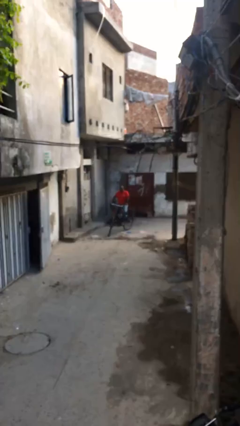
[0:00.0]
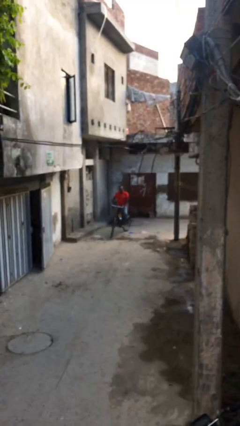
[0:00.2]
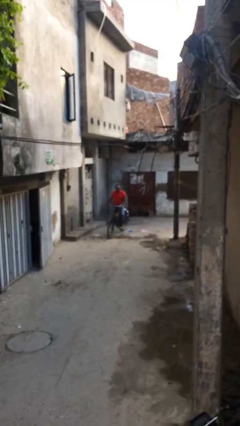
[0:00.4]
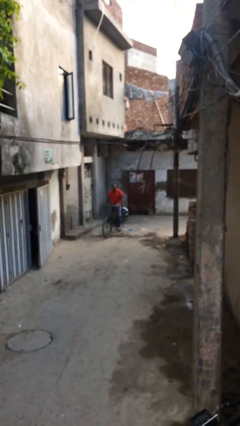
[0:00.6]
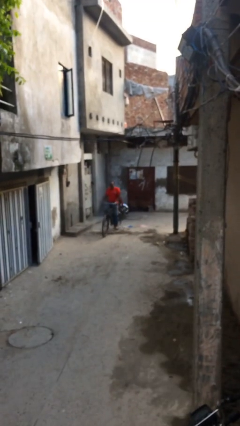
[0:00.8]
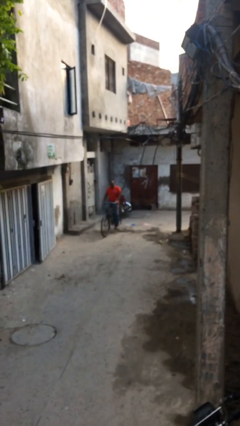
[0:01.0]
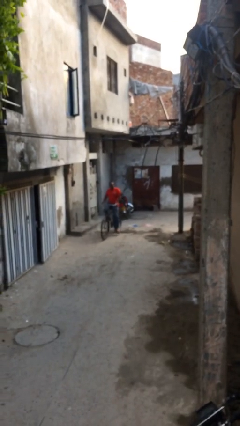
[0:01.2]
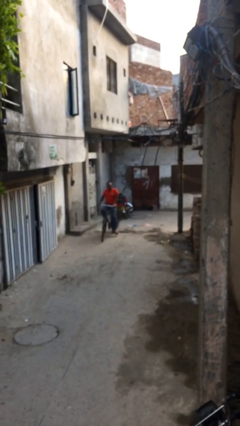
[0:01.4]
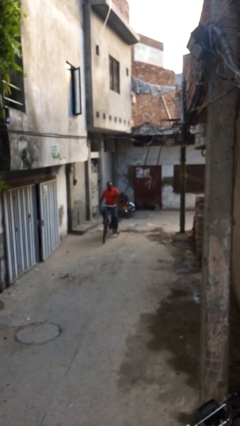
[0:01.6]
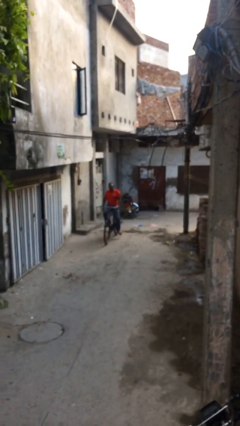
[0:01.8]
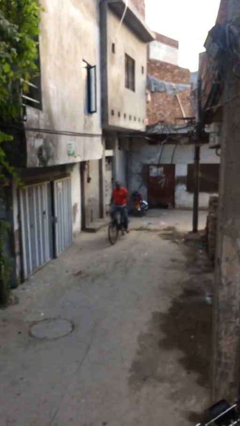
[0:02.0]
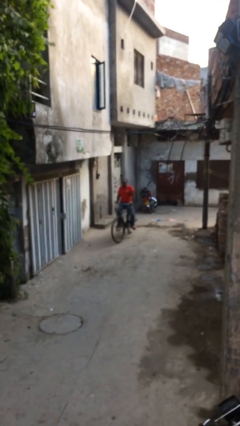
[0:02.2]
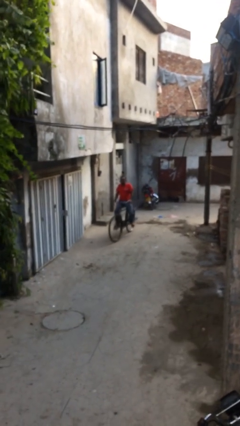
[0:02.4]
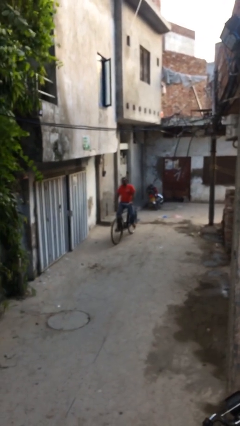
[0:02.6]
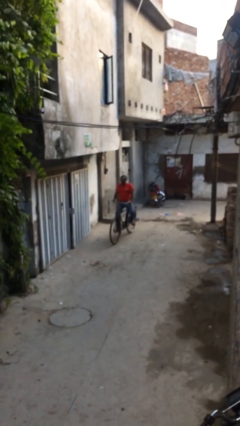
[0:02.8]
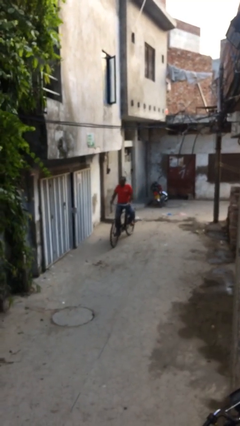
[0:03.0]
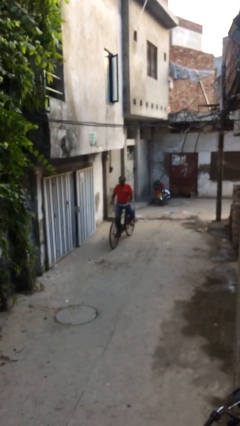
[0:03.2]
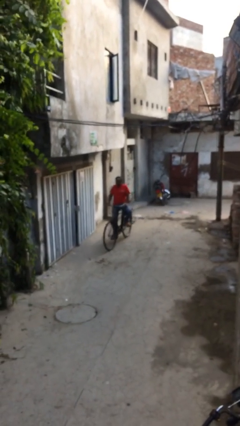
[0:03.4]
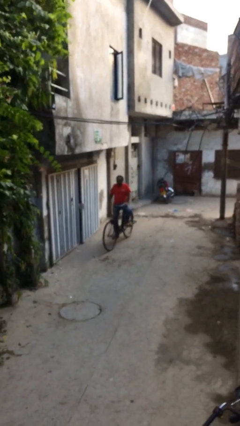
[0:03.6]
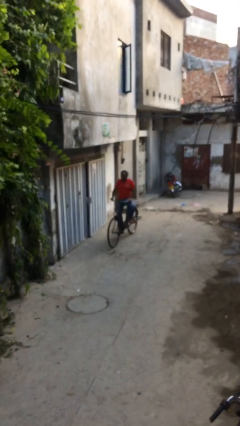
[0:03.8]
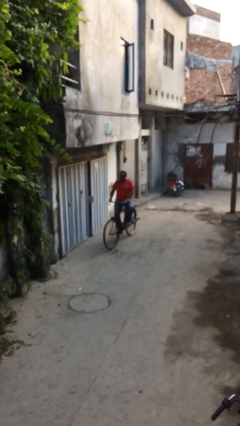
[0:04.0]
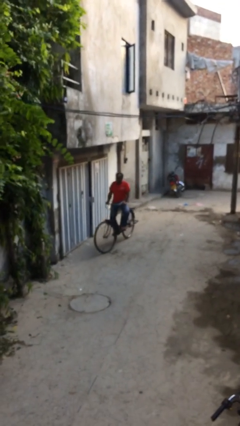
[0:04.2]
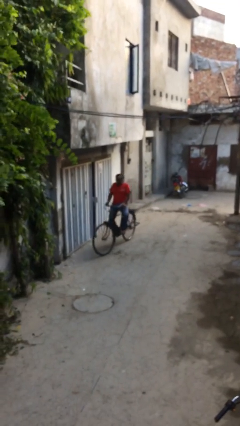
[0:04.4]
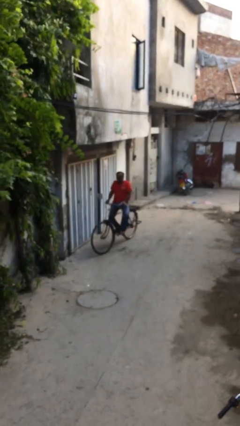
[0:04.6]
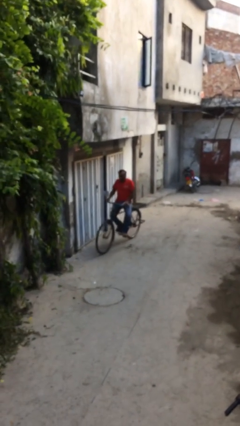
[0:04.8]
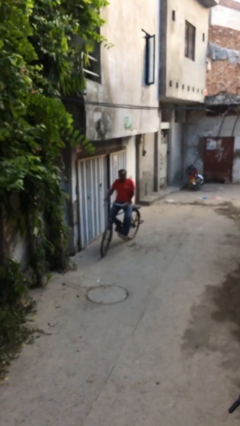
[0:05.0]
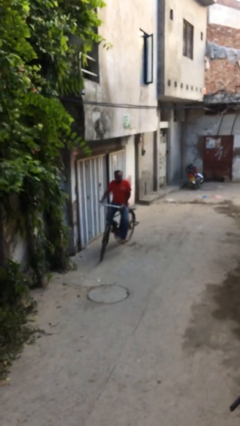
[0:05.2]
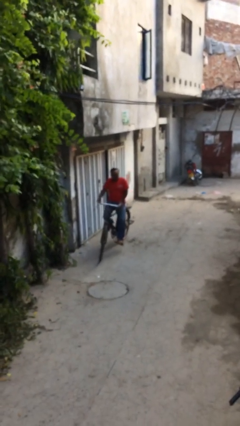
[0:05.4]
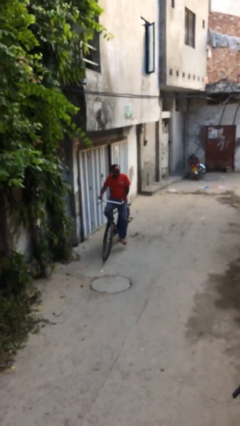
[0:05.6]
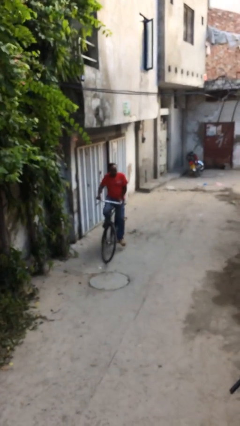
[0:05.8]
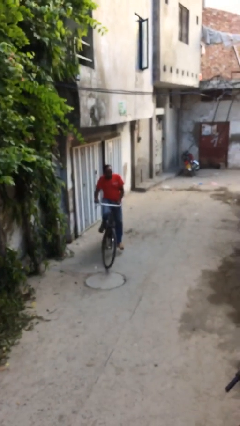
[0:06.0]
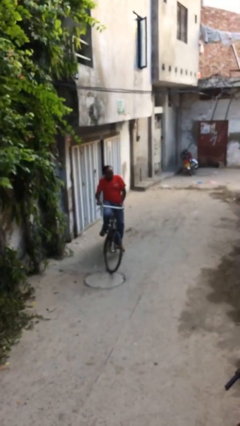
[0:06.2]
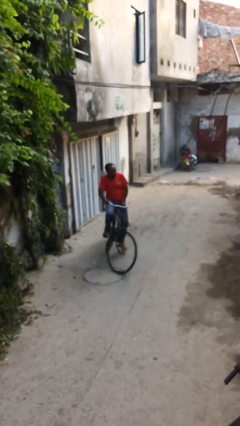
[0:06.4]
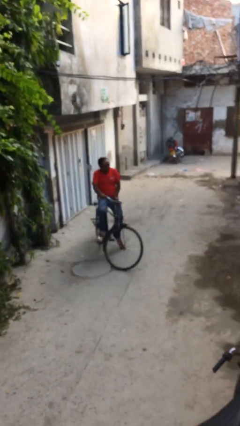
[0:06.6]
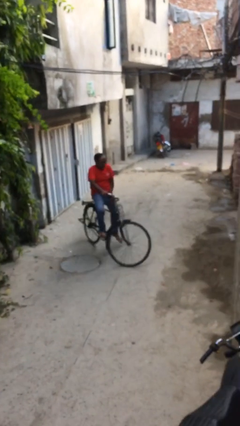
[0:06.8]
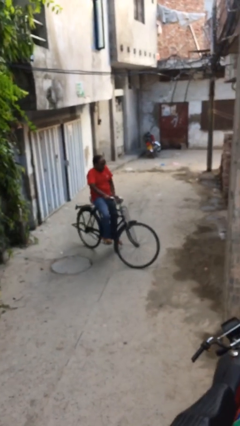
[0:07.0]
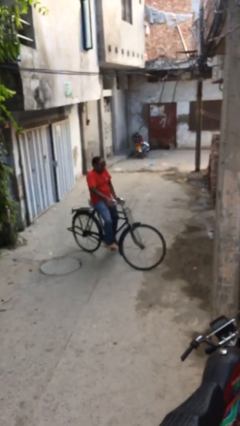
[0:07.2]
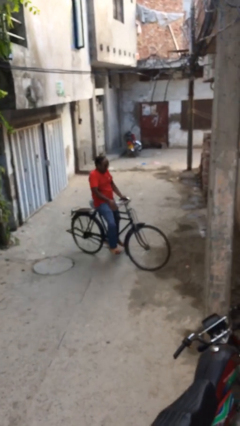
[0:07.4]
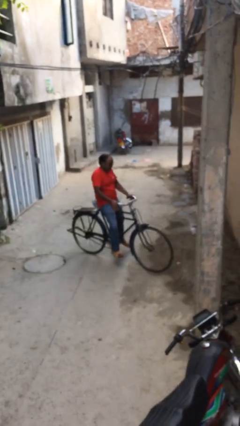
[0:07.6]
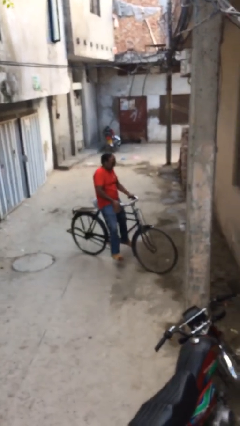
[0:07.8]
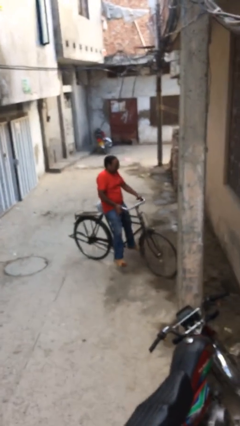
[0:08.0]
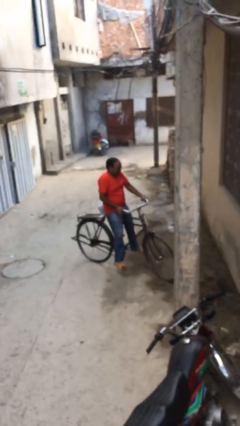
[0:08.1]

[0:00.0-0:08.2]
person rides bicycle

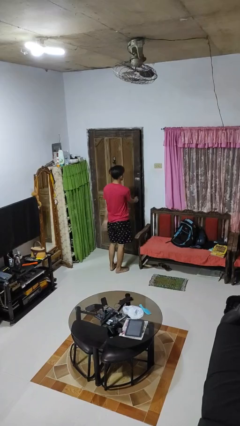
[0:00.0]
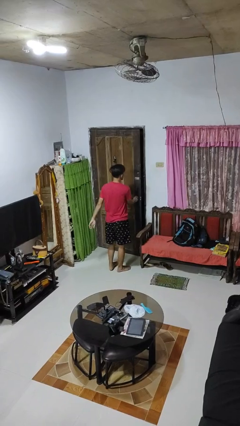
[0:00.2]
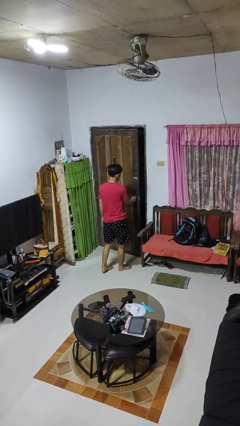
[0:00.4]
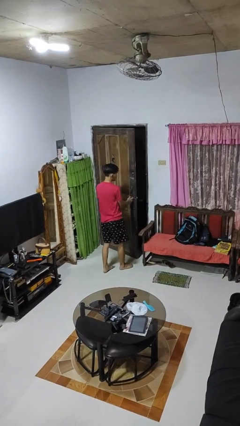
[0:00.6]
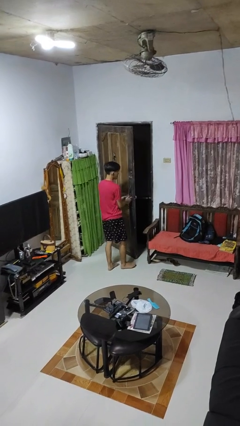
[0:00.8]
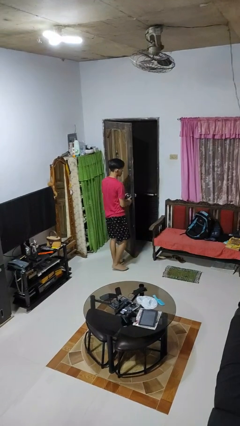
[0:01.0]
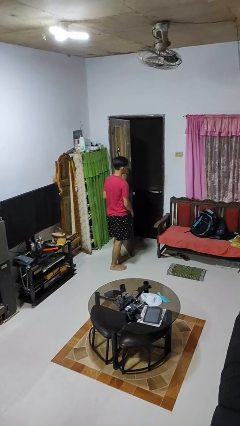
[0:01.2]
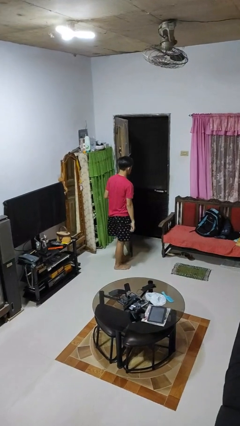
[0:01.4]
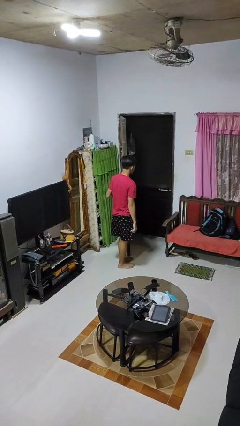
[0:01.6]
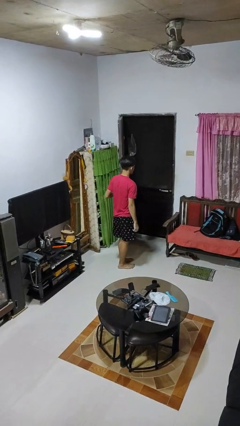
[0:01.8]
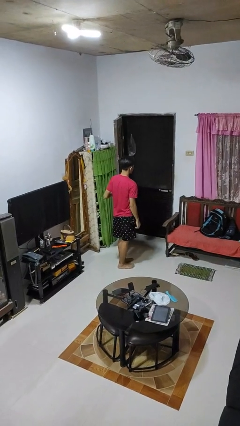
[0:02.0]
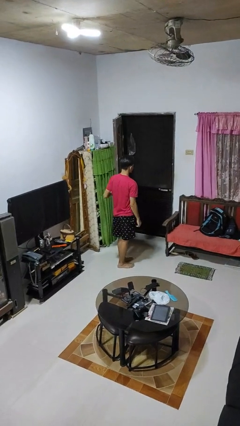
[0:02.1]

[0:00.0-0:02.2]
person opens facility door

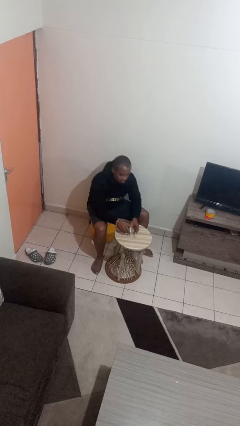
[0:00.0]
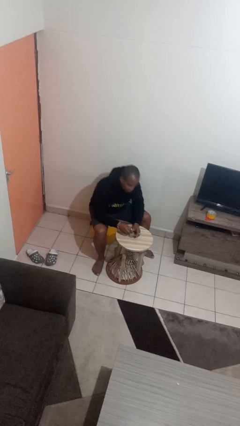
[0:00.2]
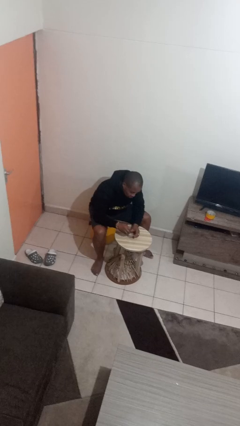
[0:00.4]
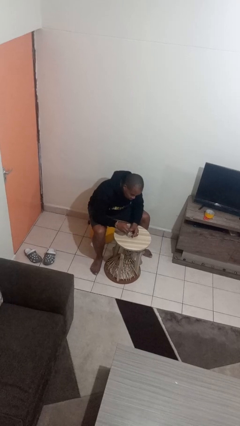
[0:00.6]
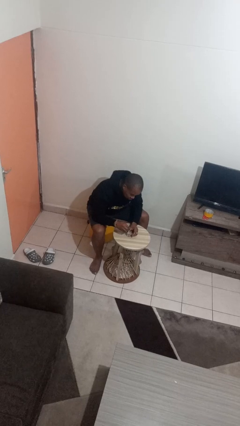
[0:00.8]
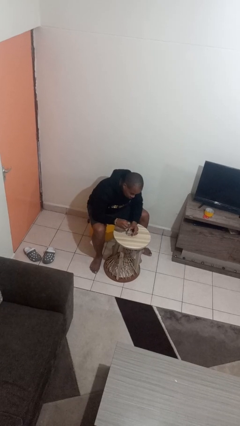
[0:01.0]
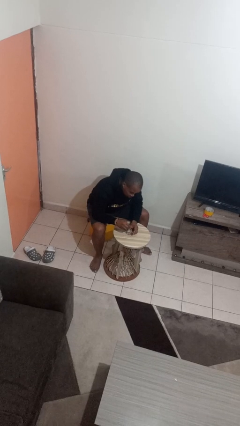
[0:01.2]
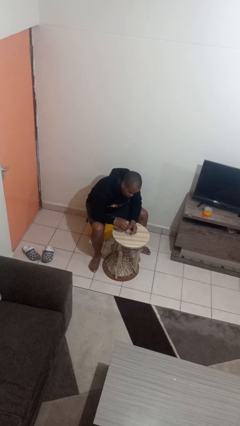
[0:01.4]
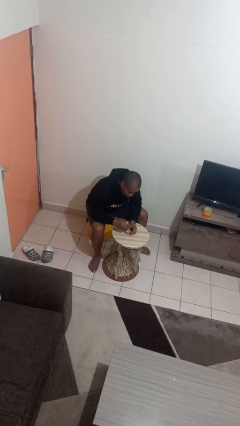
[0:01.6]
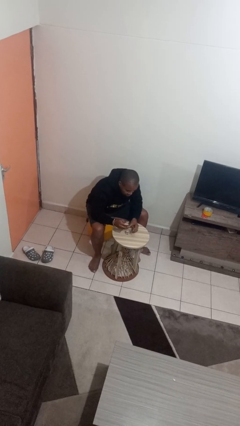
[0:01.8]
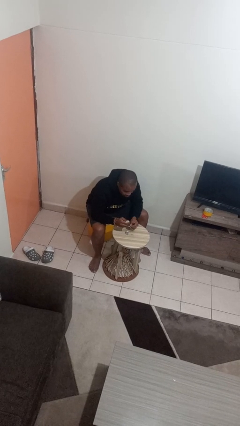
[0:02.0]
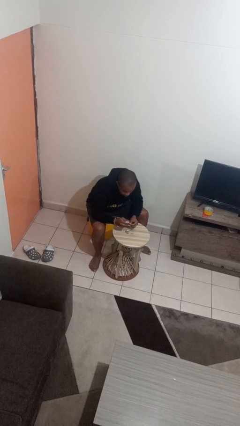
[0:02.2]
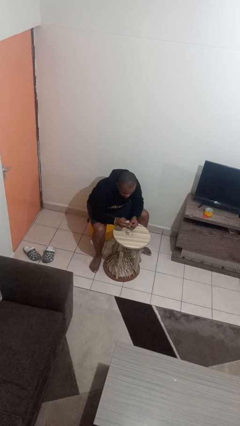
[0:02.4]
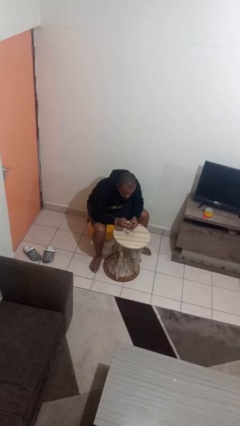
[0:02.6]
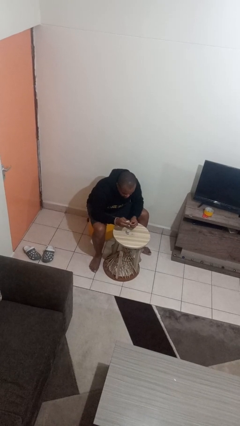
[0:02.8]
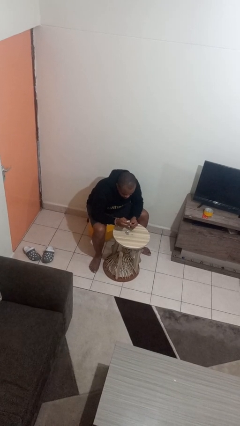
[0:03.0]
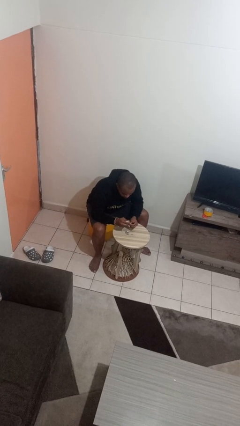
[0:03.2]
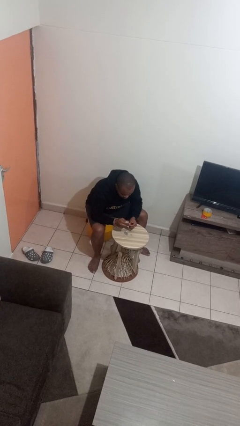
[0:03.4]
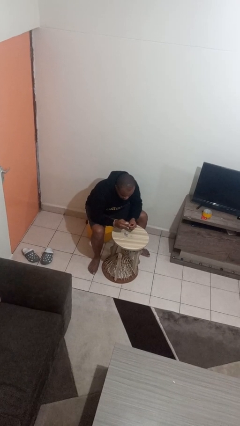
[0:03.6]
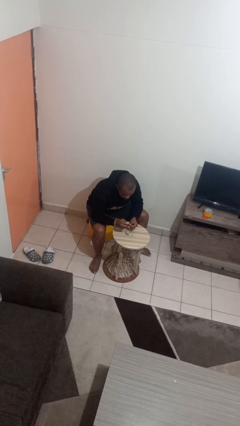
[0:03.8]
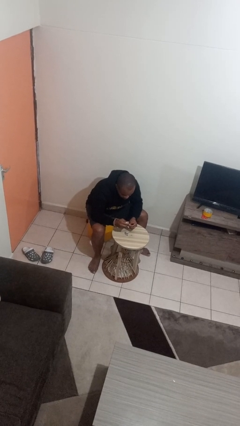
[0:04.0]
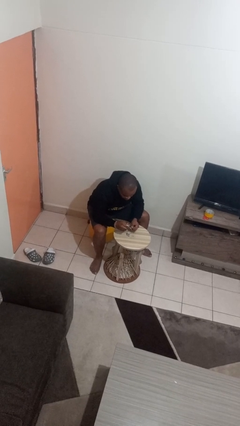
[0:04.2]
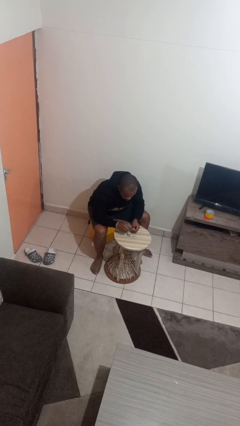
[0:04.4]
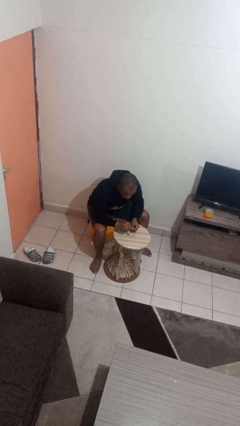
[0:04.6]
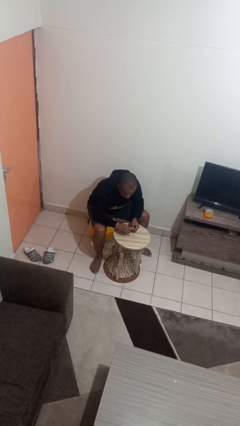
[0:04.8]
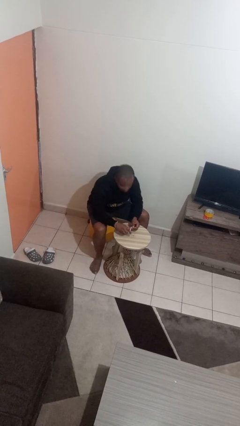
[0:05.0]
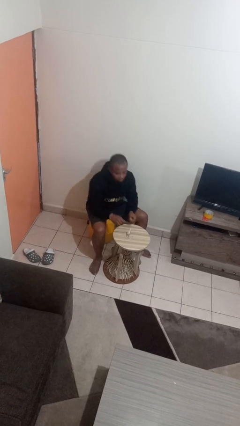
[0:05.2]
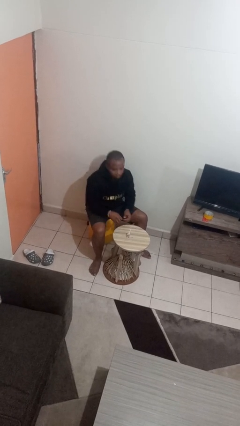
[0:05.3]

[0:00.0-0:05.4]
person paints fingernails

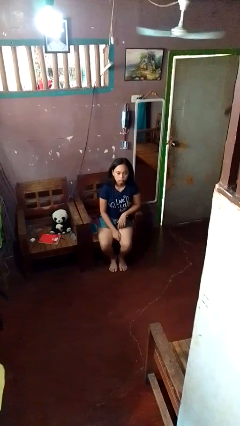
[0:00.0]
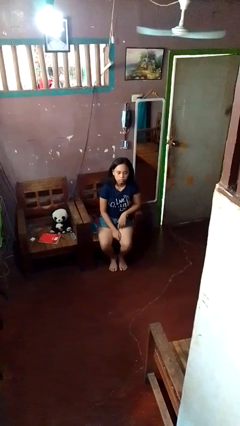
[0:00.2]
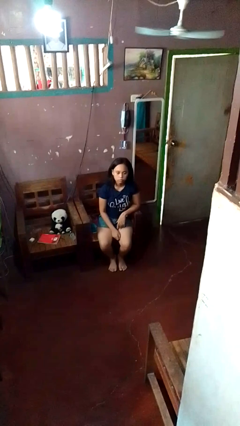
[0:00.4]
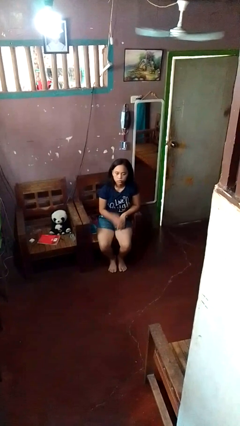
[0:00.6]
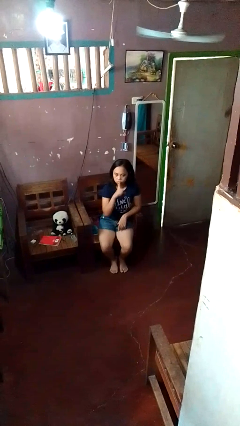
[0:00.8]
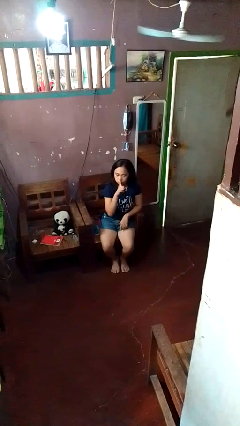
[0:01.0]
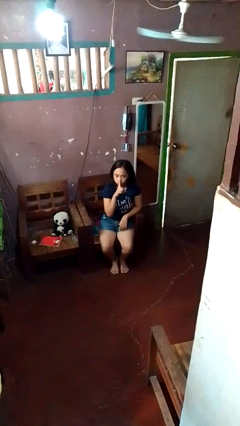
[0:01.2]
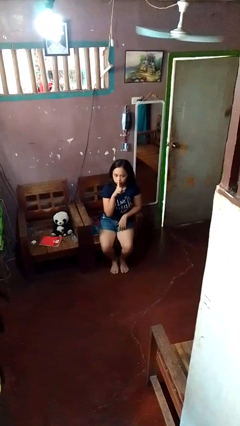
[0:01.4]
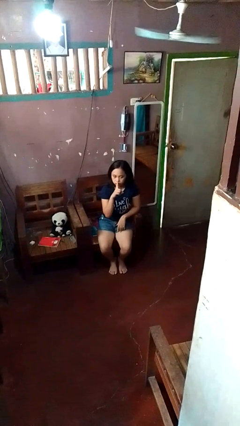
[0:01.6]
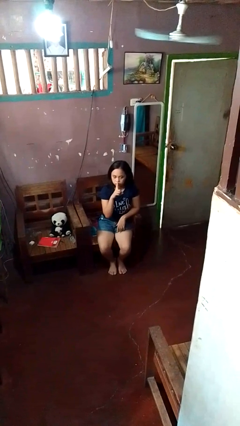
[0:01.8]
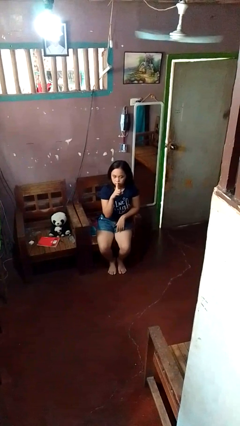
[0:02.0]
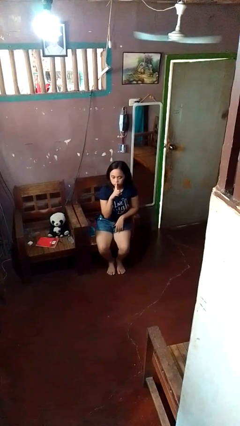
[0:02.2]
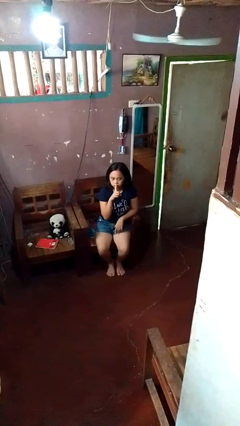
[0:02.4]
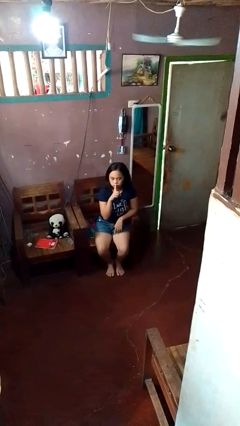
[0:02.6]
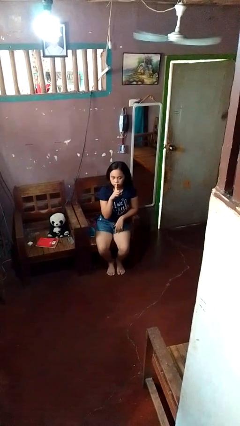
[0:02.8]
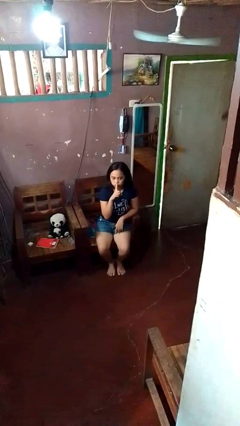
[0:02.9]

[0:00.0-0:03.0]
person gestures be quiet
